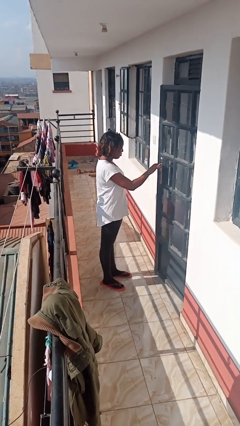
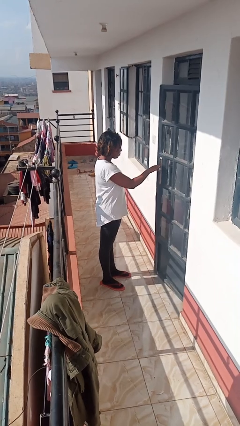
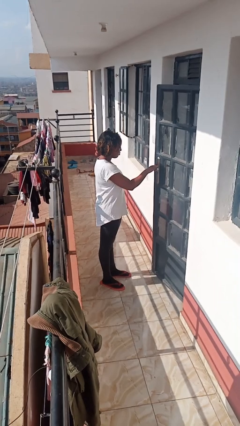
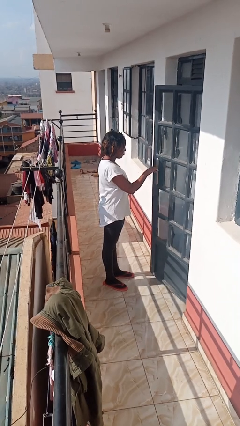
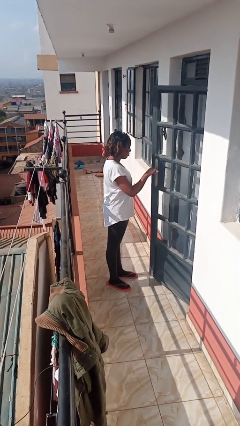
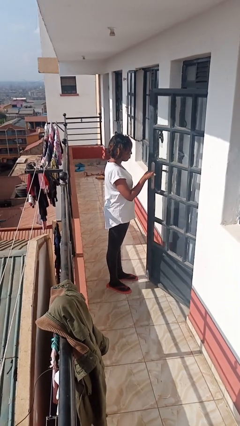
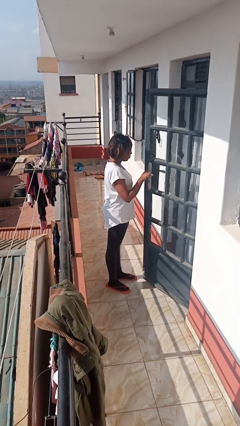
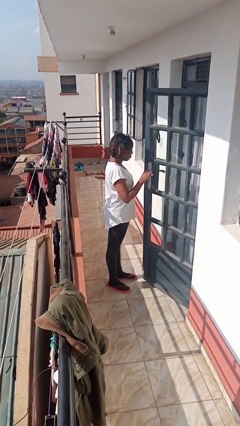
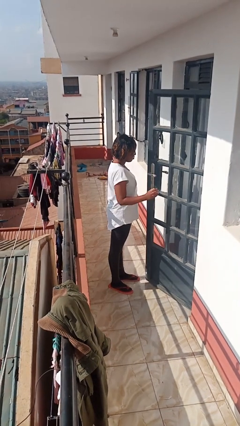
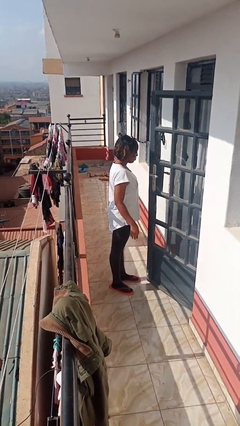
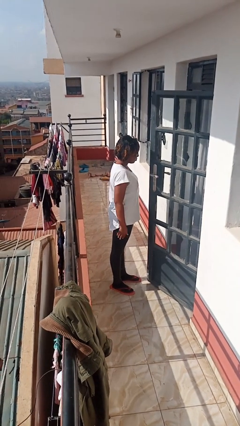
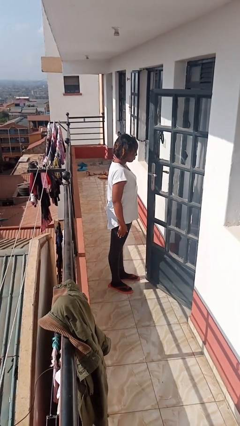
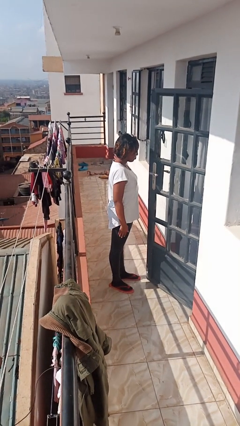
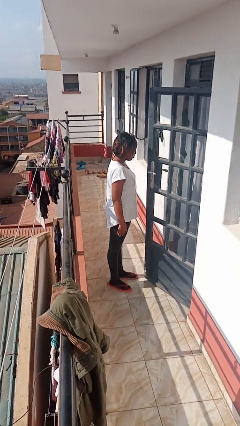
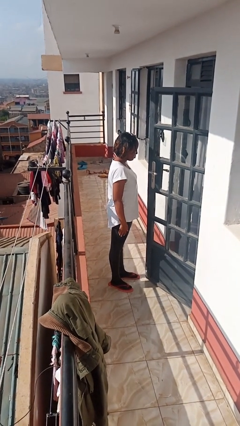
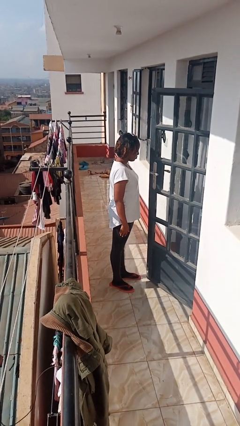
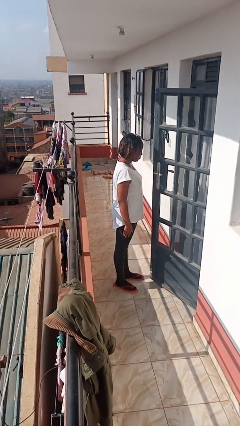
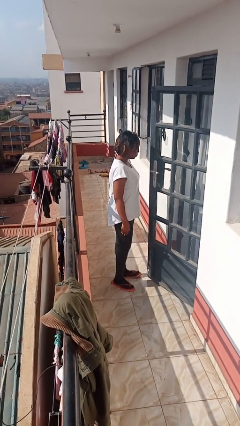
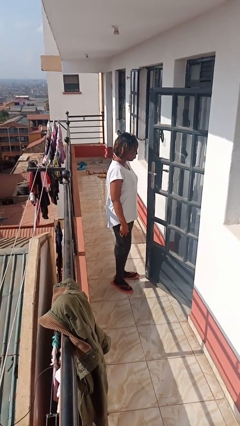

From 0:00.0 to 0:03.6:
person opens facility door

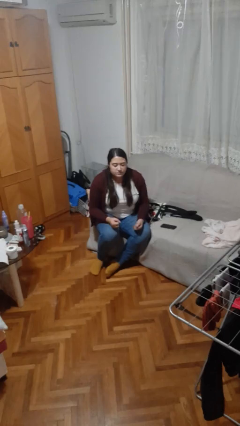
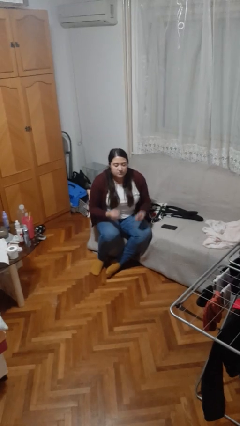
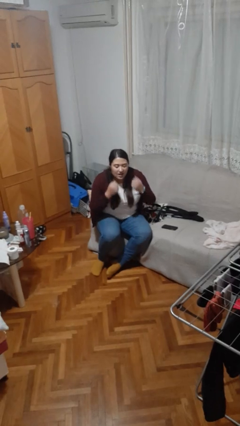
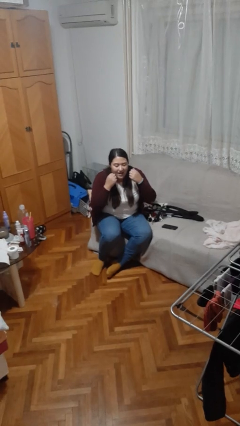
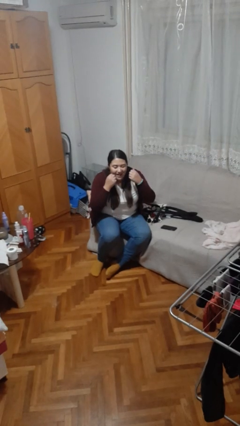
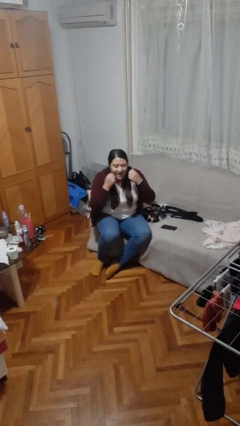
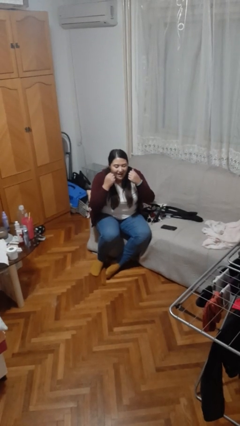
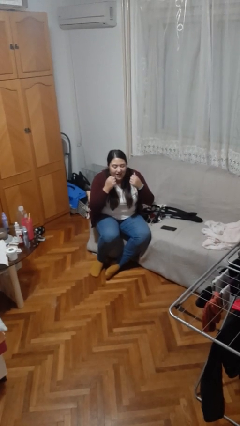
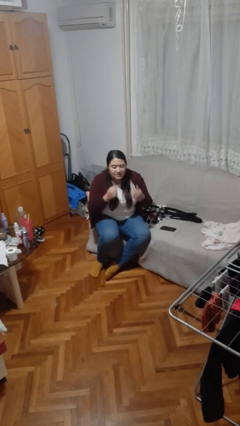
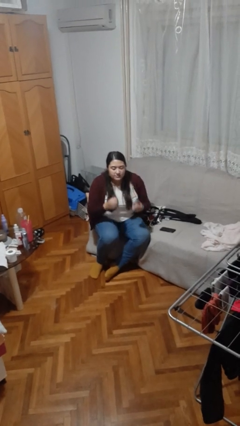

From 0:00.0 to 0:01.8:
person flosses

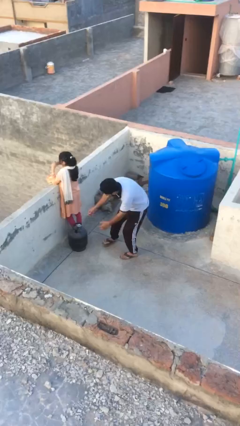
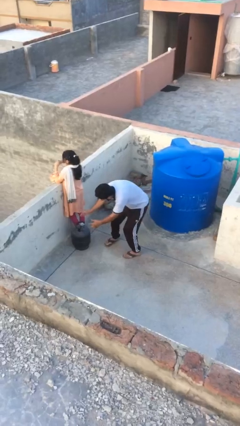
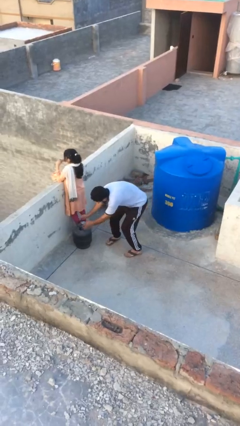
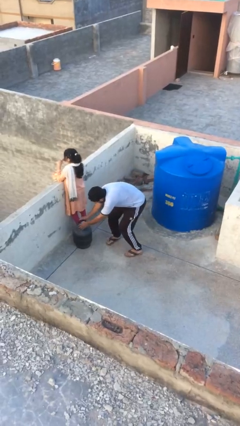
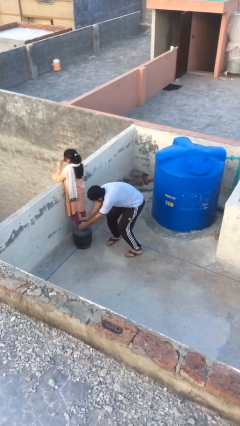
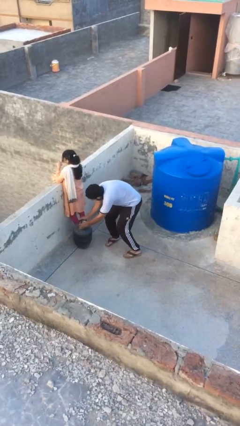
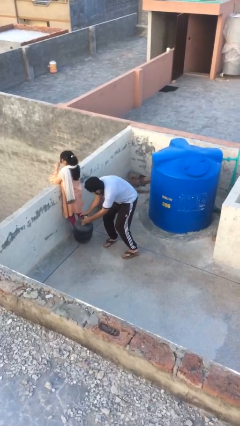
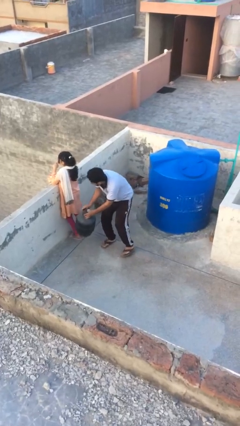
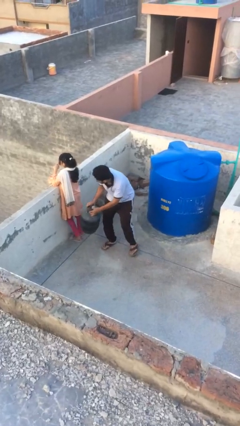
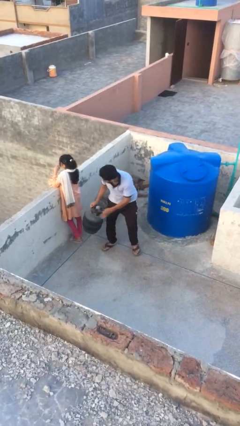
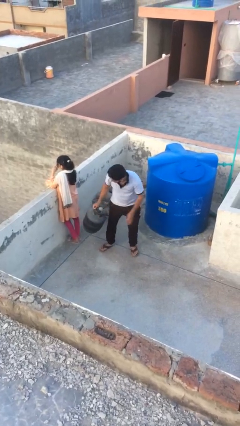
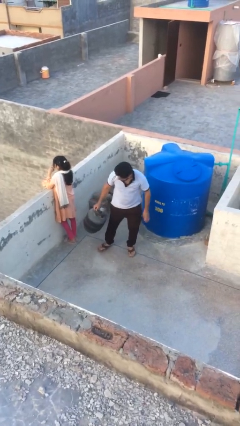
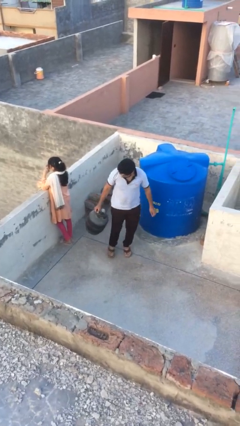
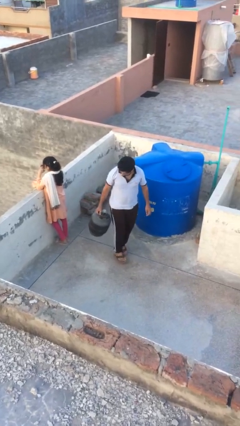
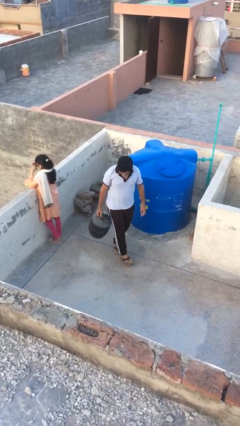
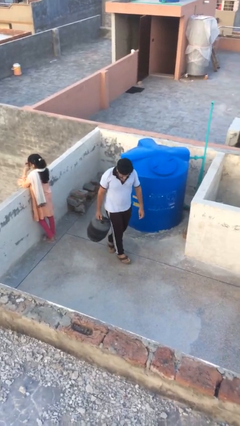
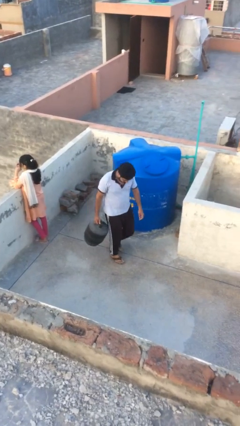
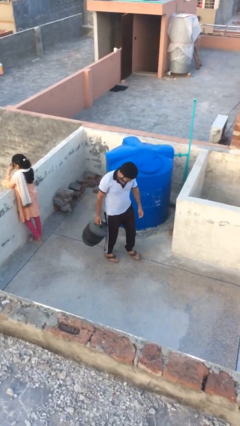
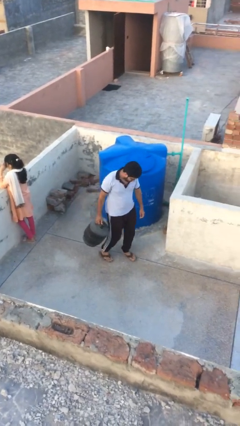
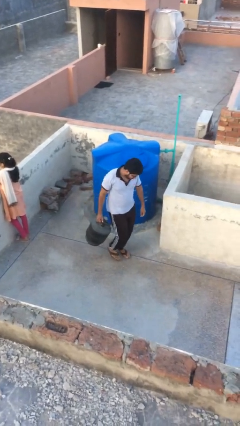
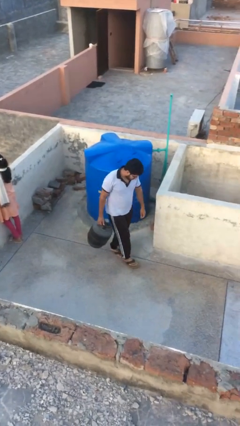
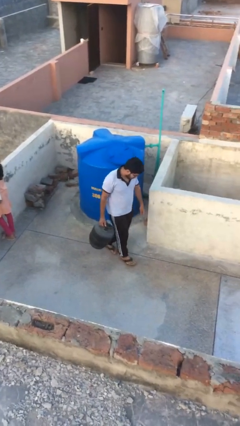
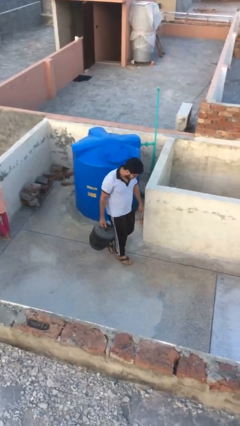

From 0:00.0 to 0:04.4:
person steals object from person

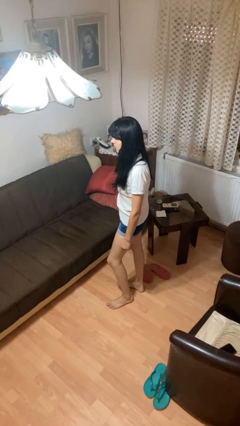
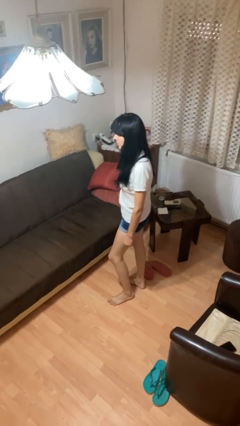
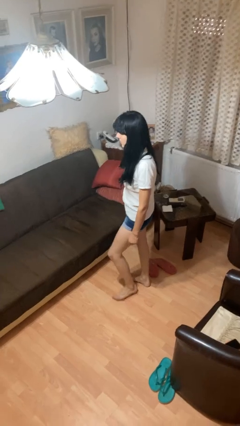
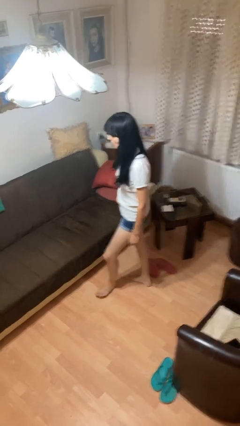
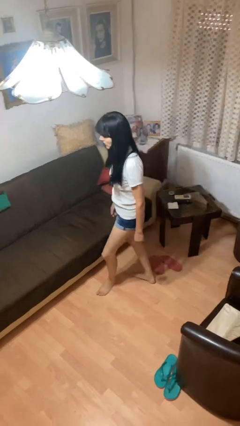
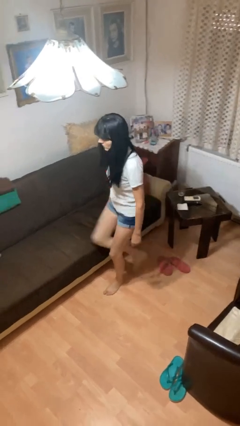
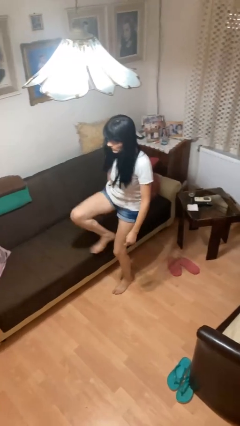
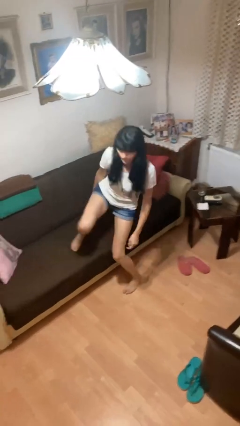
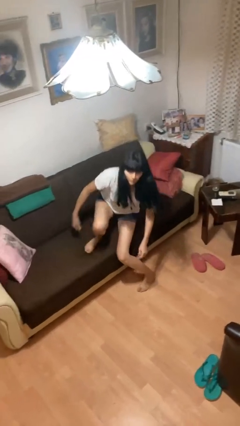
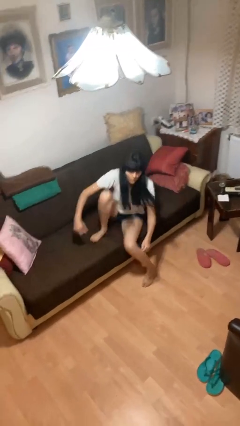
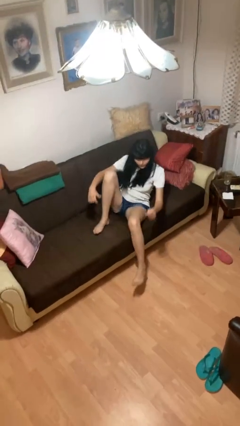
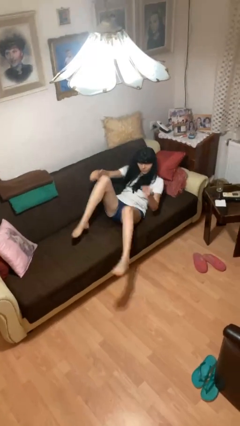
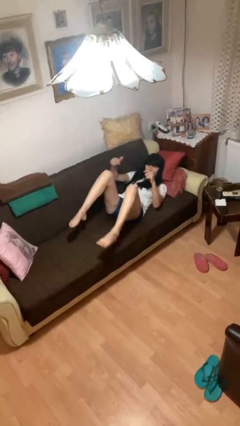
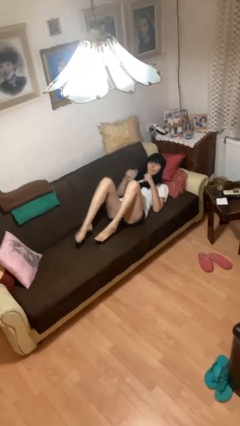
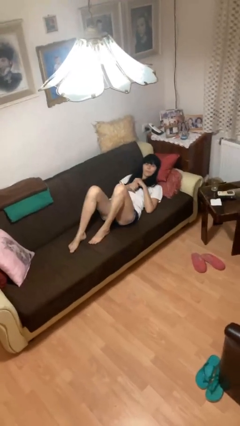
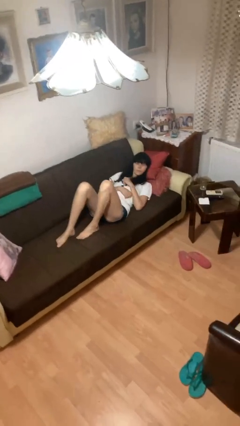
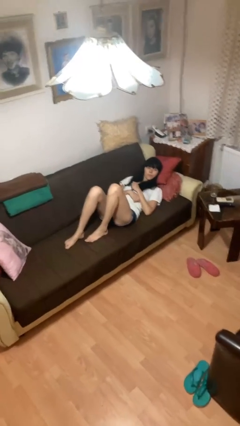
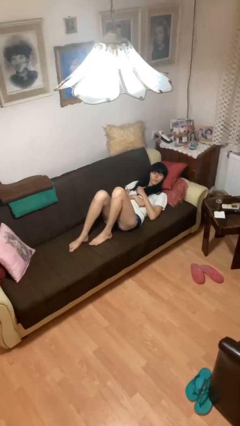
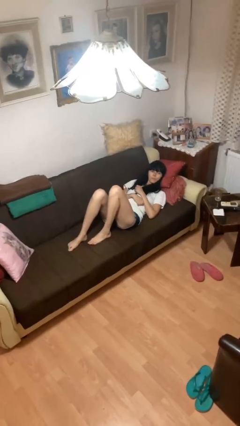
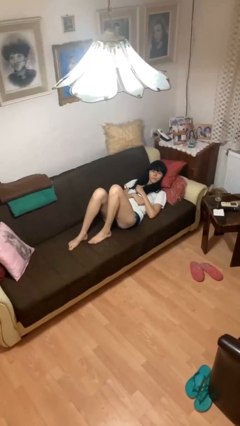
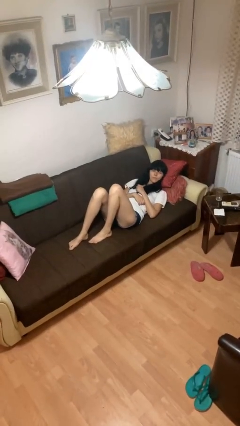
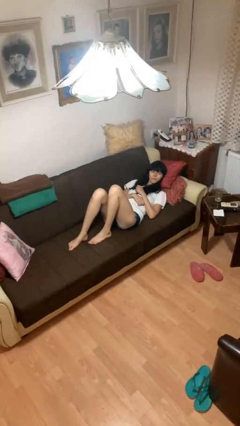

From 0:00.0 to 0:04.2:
person lies down on couch

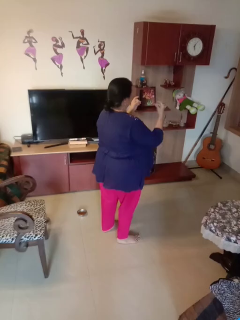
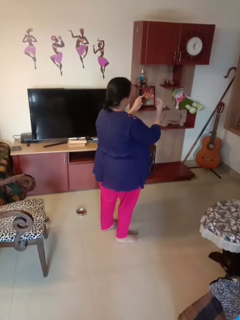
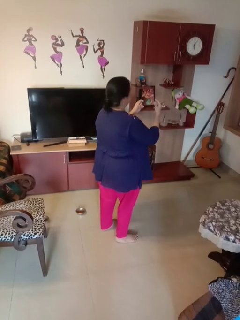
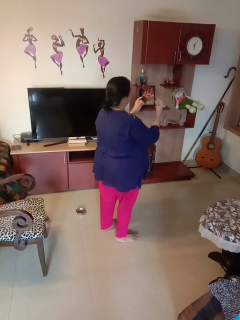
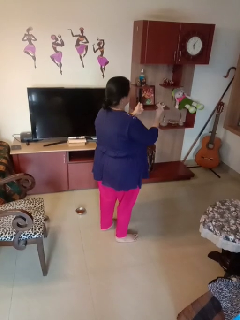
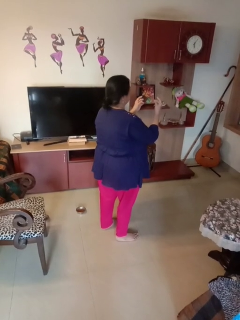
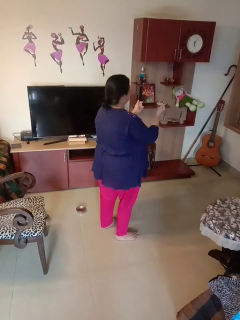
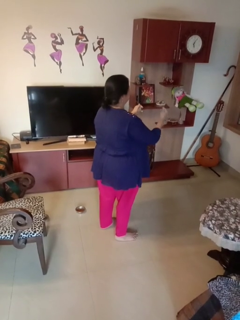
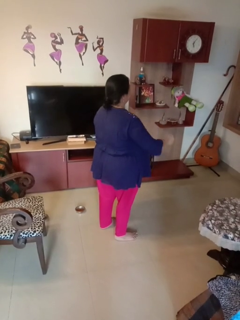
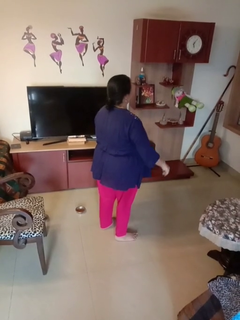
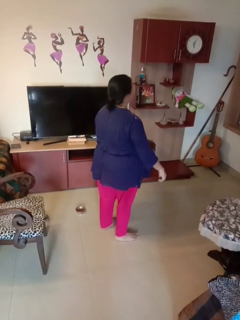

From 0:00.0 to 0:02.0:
person snaps fingers

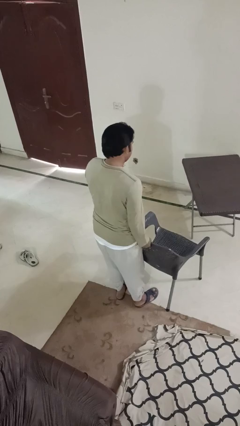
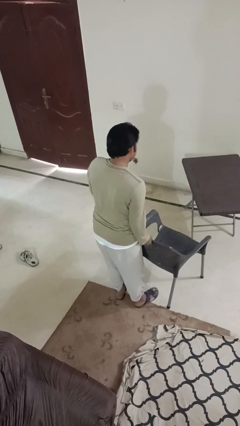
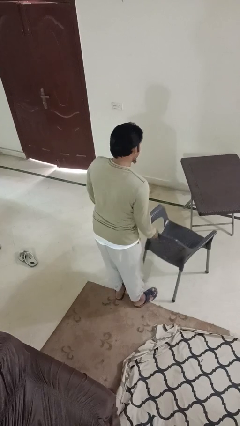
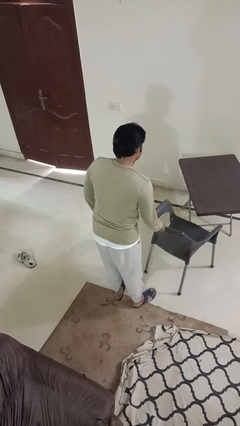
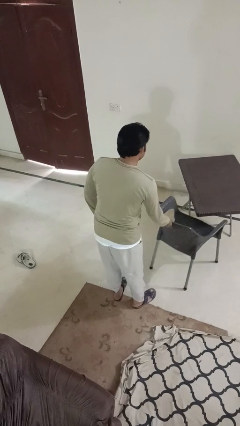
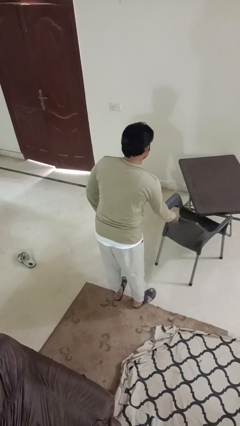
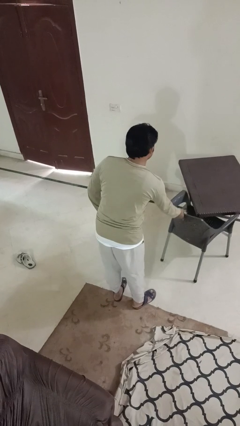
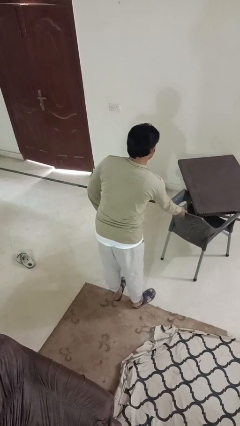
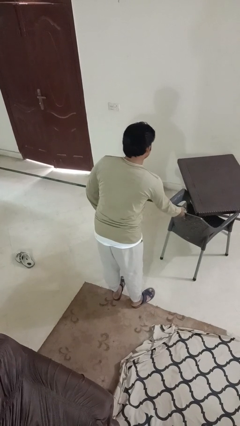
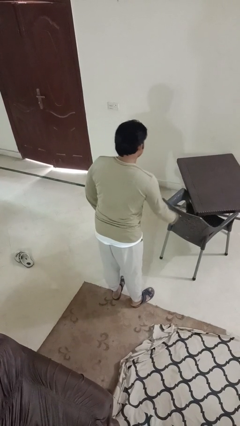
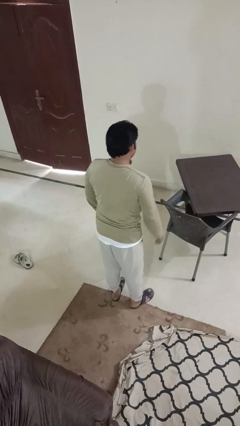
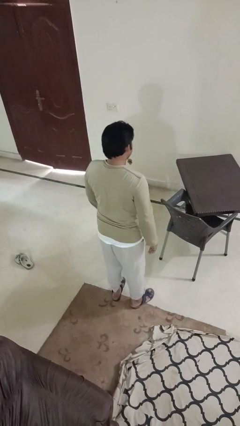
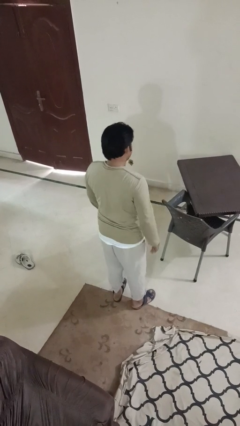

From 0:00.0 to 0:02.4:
person pushes in chair
